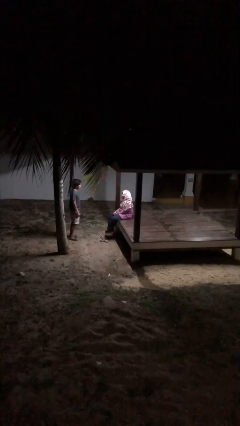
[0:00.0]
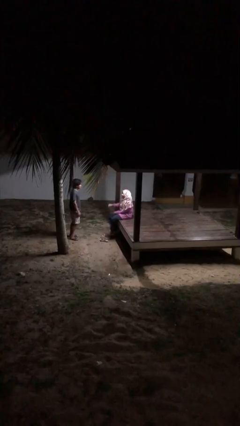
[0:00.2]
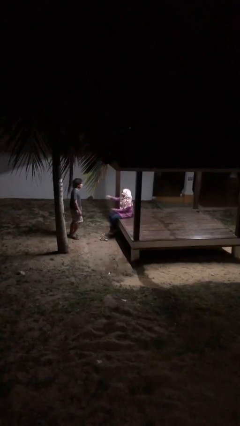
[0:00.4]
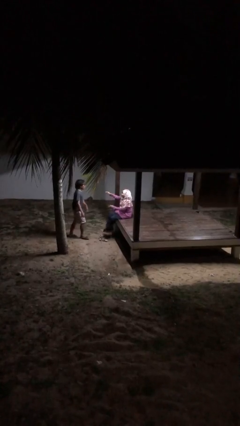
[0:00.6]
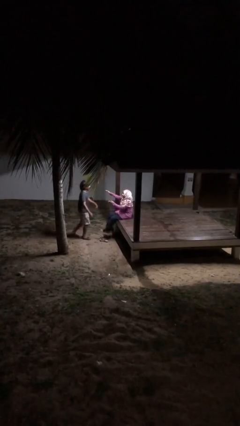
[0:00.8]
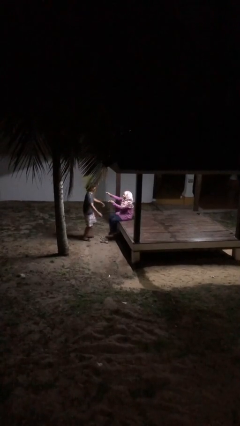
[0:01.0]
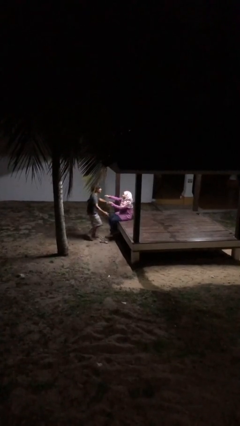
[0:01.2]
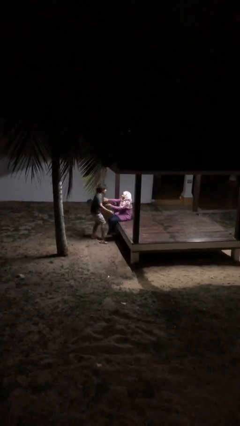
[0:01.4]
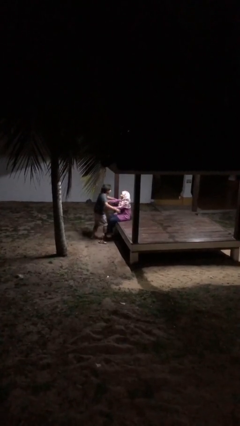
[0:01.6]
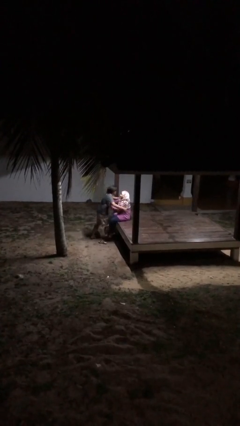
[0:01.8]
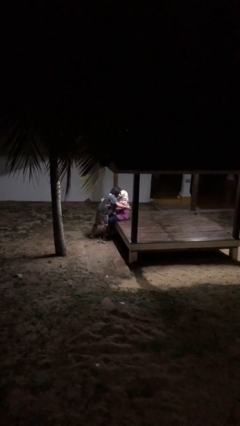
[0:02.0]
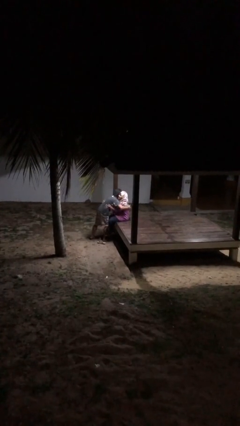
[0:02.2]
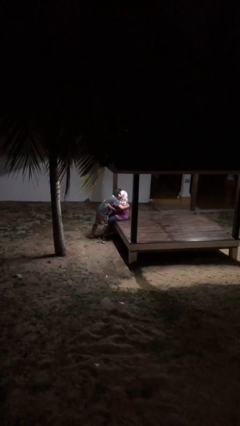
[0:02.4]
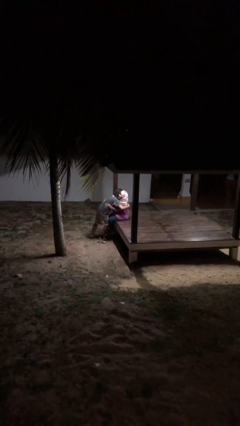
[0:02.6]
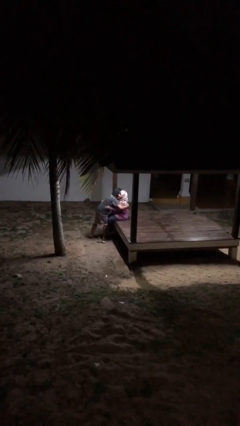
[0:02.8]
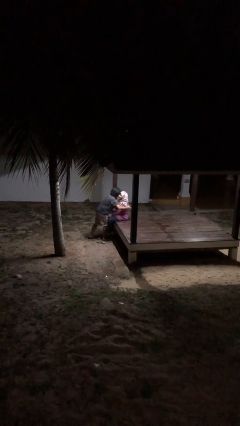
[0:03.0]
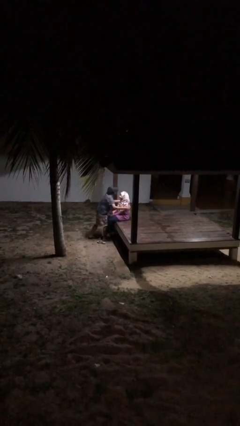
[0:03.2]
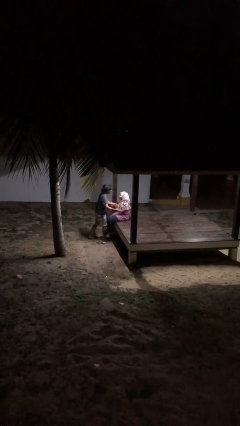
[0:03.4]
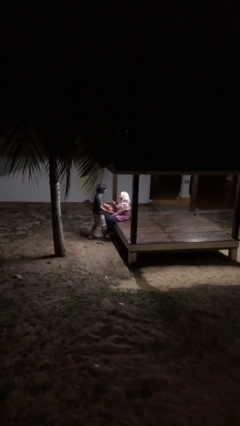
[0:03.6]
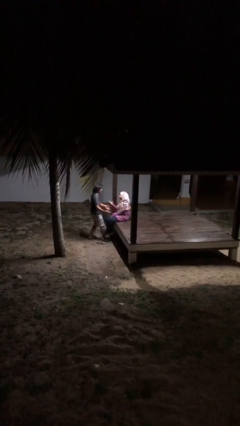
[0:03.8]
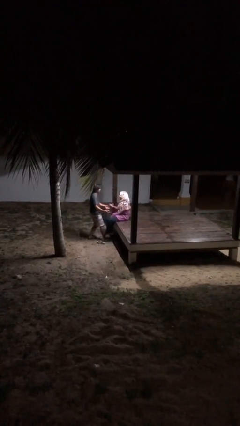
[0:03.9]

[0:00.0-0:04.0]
person embraces person

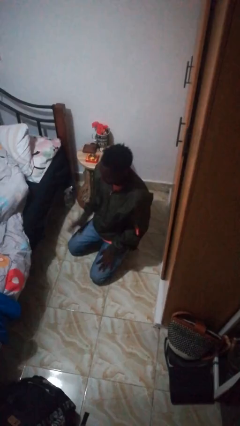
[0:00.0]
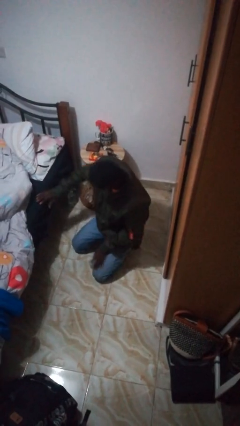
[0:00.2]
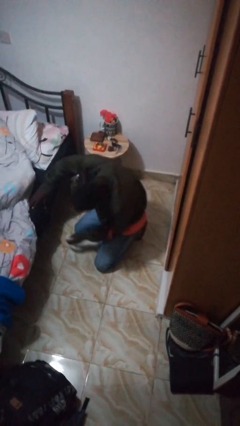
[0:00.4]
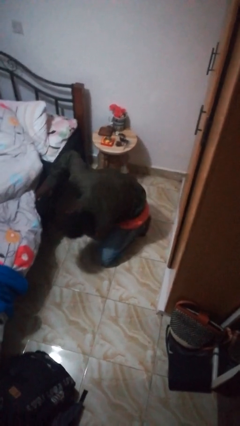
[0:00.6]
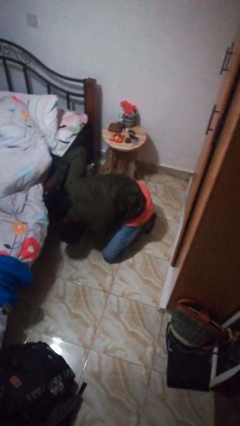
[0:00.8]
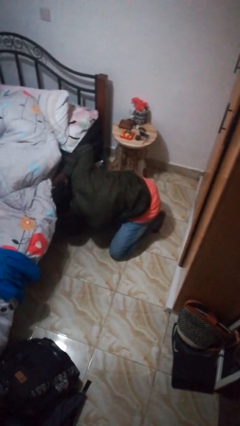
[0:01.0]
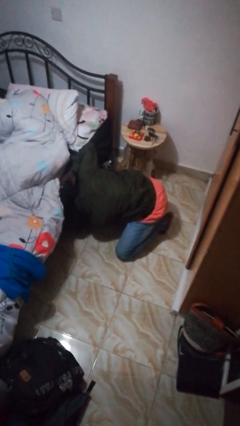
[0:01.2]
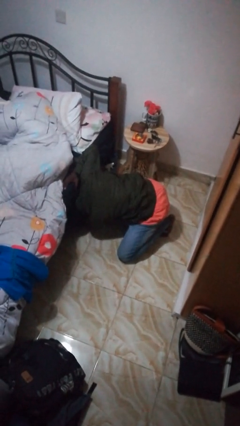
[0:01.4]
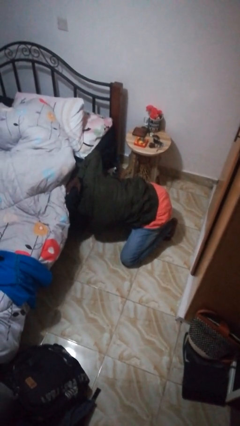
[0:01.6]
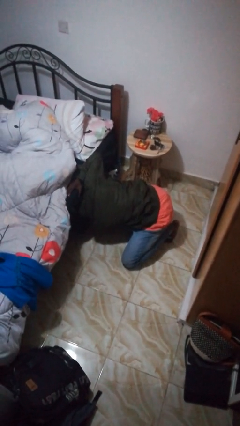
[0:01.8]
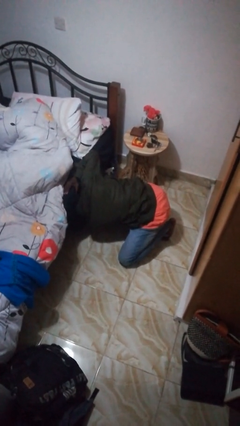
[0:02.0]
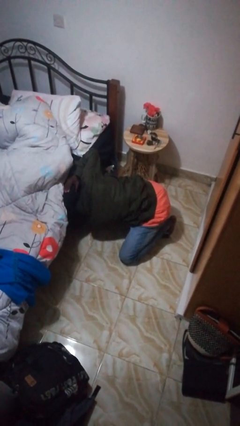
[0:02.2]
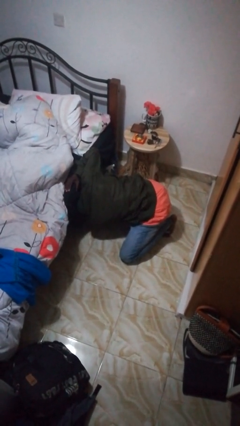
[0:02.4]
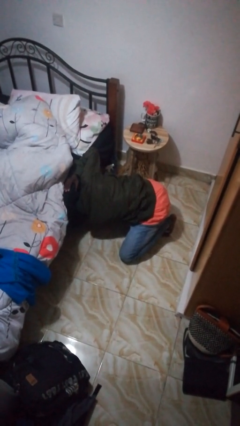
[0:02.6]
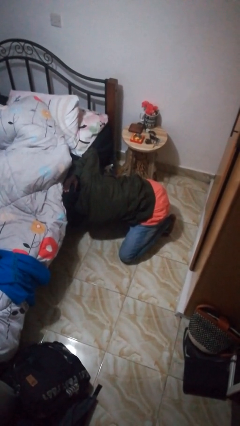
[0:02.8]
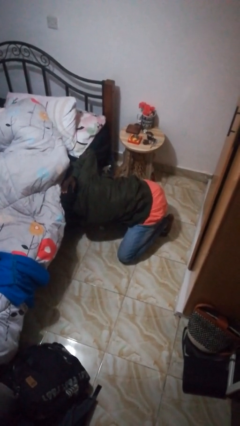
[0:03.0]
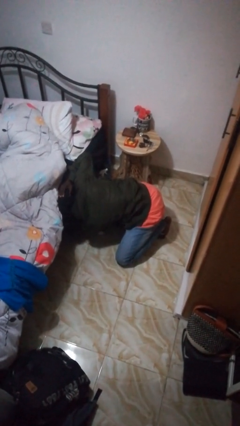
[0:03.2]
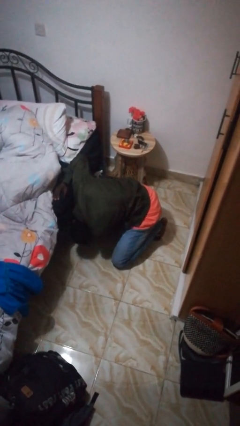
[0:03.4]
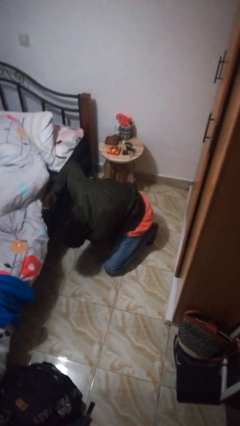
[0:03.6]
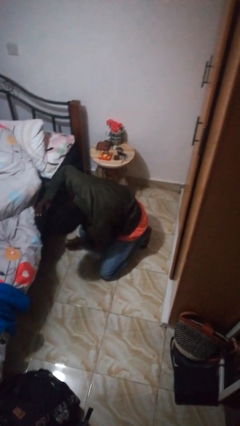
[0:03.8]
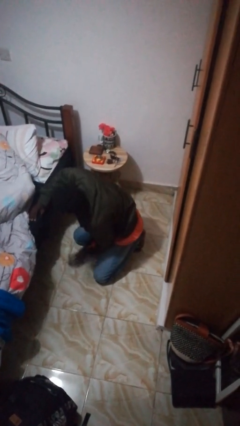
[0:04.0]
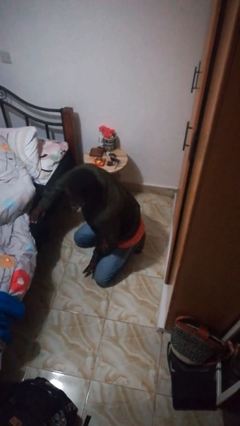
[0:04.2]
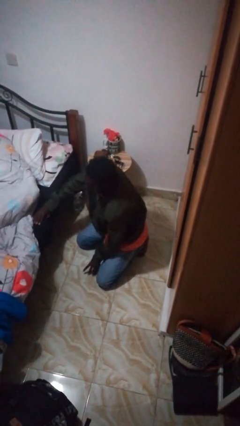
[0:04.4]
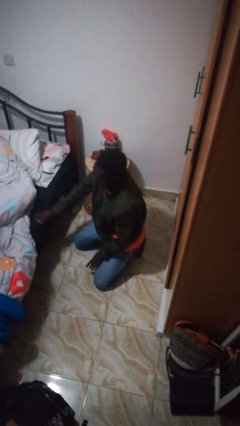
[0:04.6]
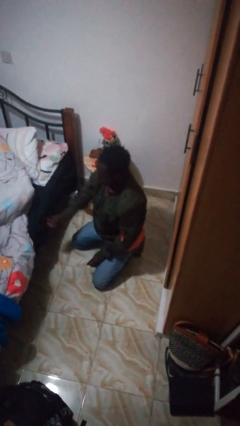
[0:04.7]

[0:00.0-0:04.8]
person searches under bed

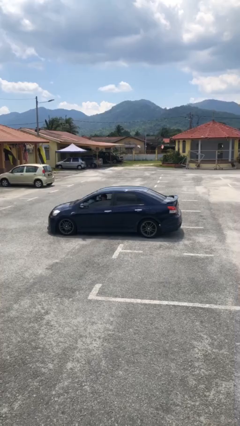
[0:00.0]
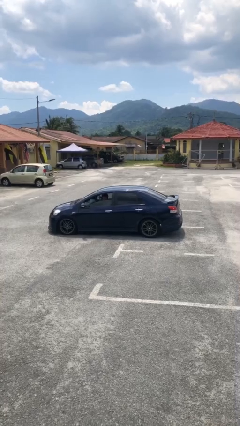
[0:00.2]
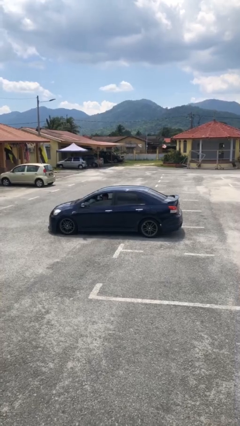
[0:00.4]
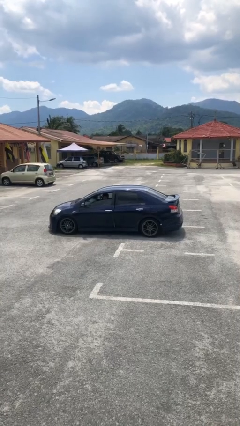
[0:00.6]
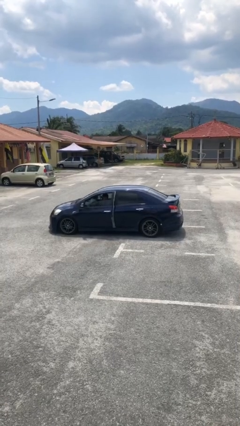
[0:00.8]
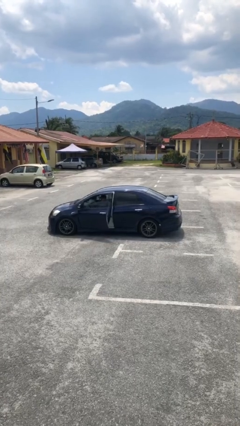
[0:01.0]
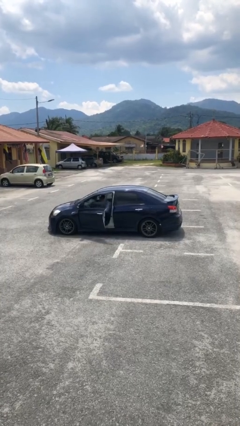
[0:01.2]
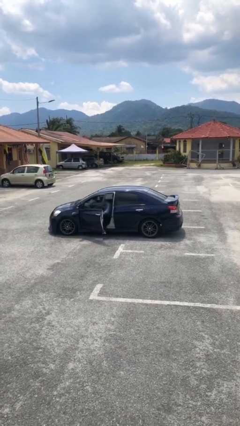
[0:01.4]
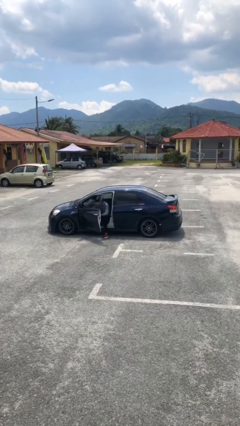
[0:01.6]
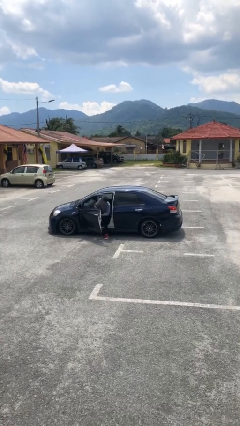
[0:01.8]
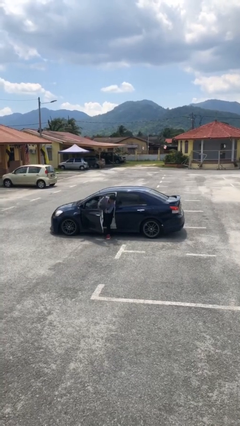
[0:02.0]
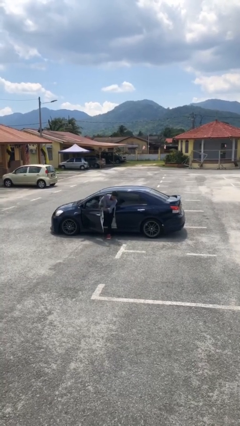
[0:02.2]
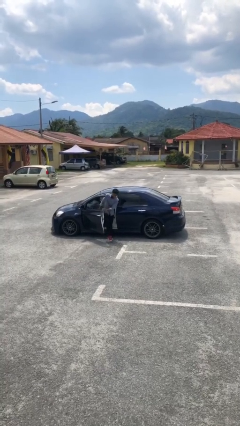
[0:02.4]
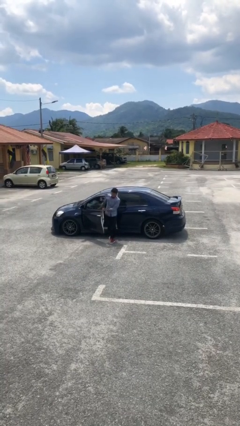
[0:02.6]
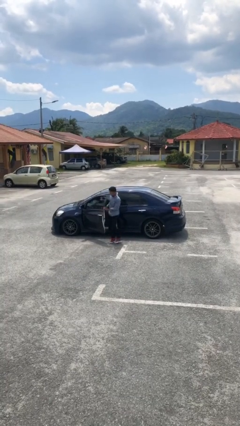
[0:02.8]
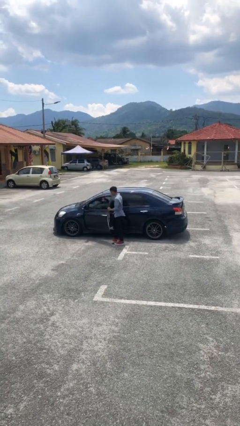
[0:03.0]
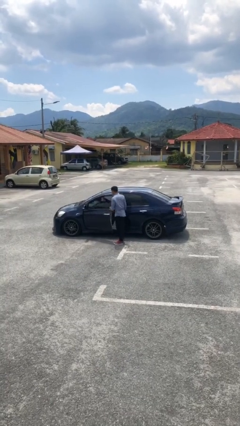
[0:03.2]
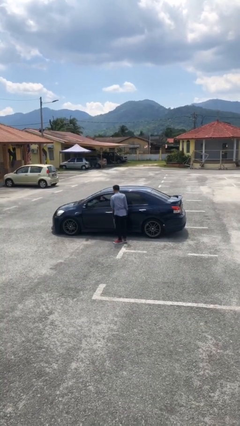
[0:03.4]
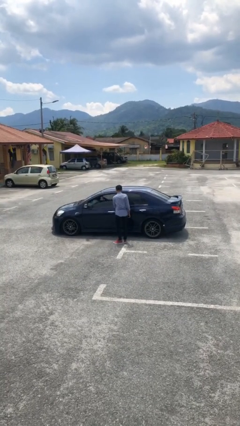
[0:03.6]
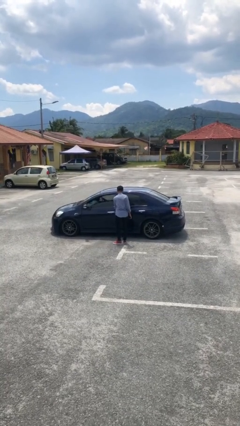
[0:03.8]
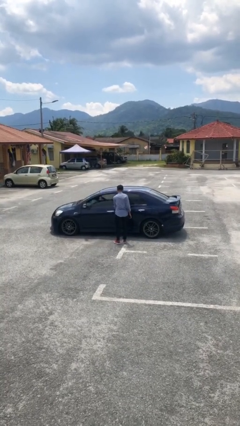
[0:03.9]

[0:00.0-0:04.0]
car drops off person

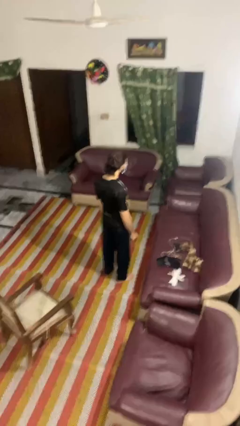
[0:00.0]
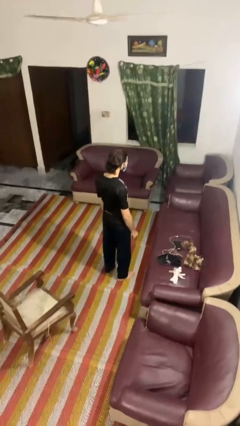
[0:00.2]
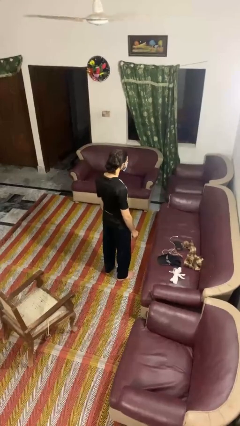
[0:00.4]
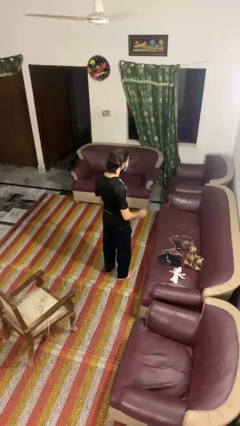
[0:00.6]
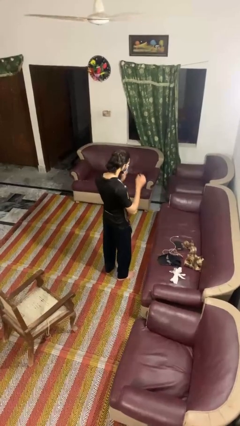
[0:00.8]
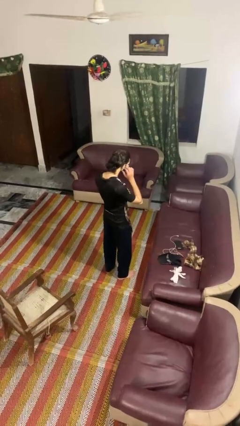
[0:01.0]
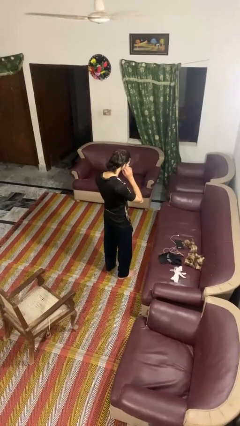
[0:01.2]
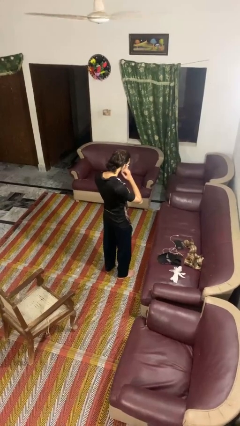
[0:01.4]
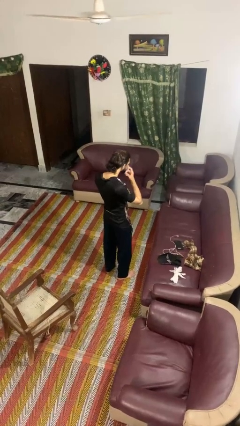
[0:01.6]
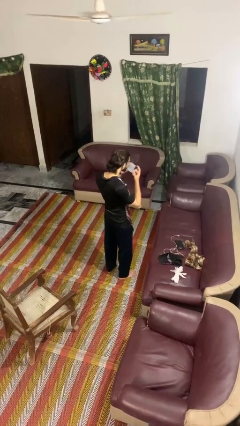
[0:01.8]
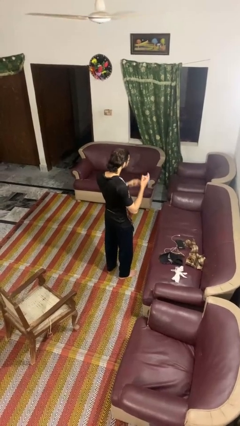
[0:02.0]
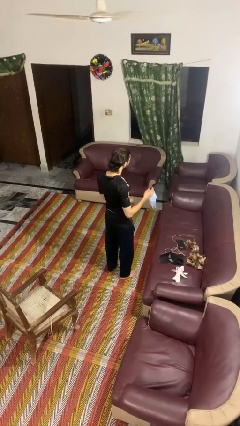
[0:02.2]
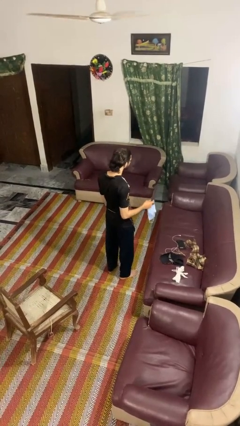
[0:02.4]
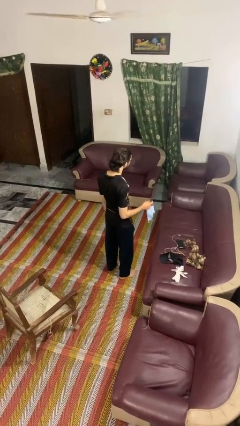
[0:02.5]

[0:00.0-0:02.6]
person takes off facemask

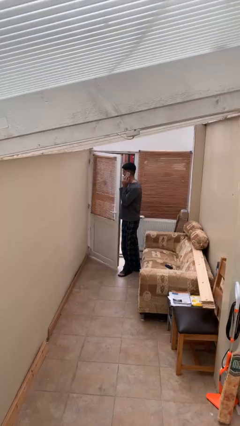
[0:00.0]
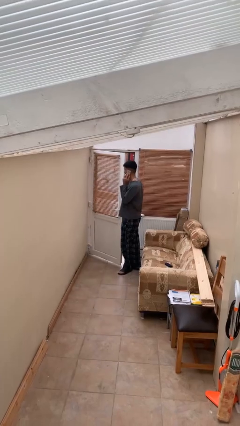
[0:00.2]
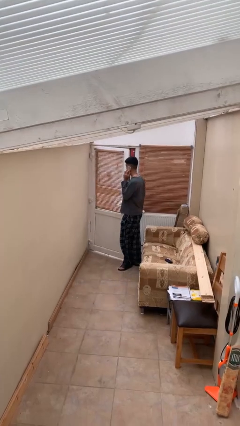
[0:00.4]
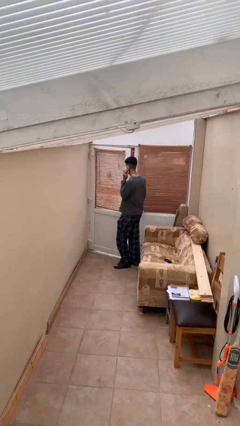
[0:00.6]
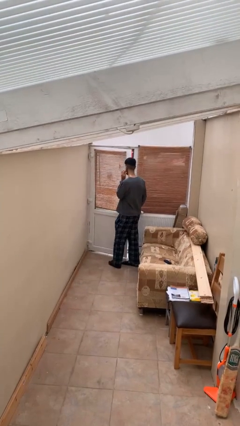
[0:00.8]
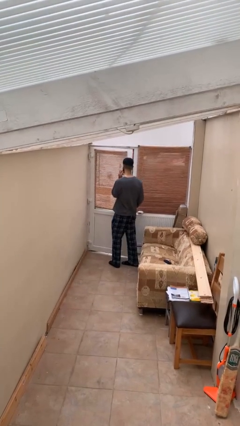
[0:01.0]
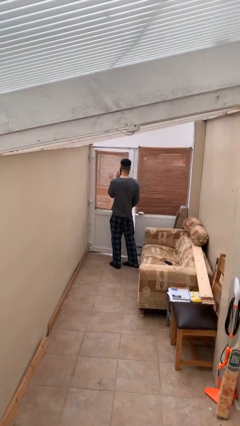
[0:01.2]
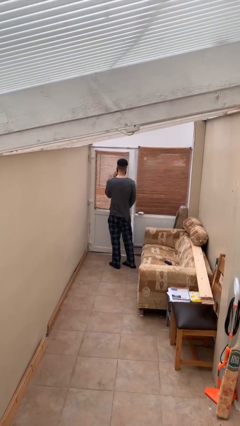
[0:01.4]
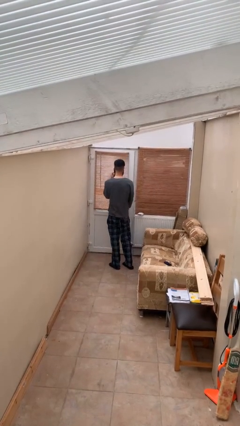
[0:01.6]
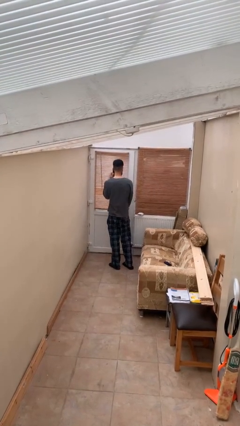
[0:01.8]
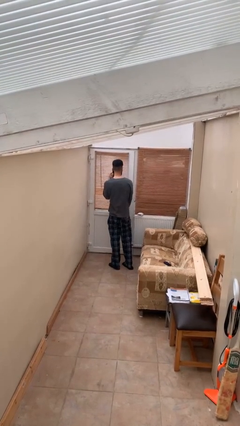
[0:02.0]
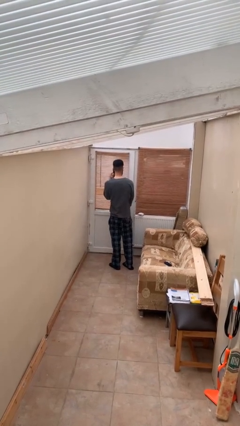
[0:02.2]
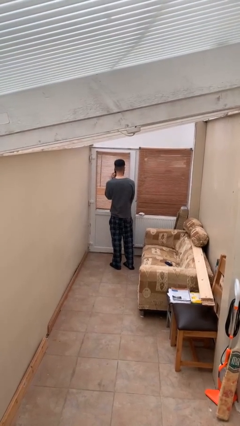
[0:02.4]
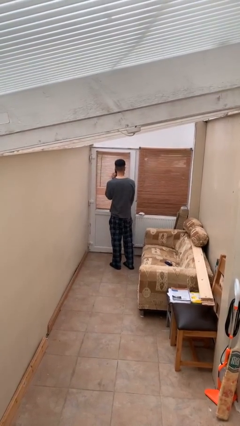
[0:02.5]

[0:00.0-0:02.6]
person closes facility door
